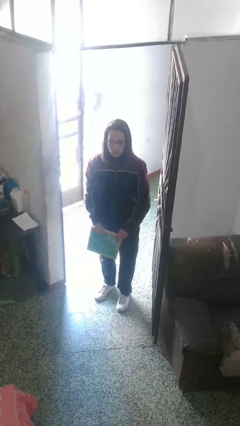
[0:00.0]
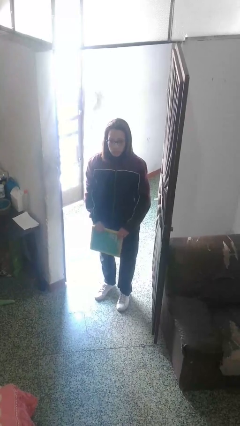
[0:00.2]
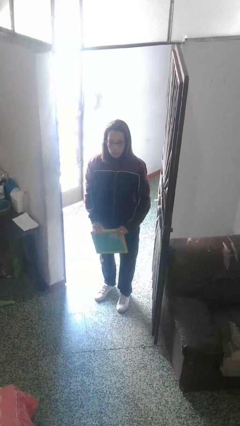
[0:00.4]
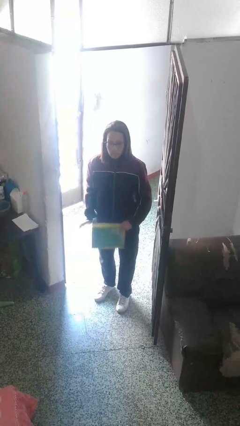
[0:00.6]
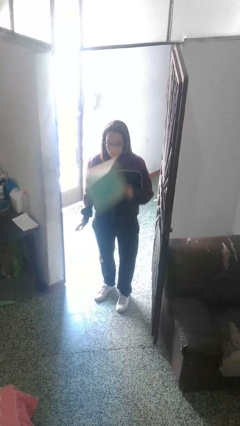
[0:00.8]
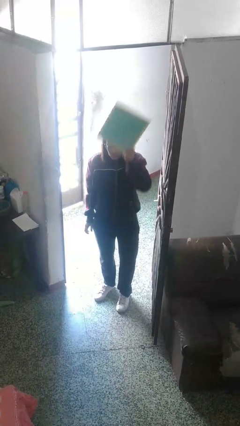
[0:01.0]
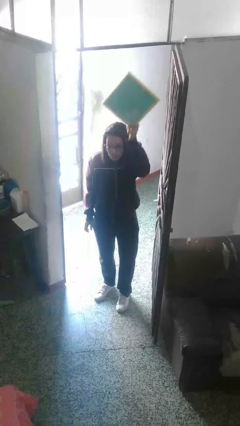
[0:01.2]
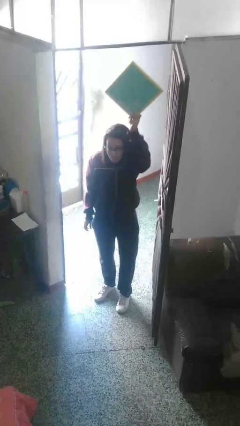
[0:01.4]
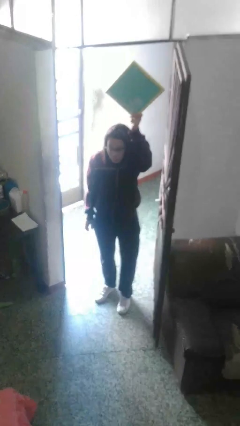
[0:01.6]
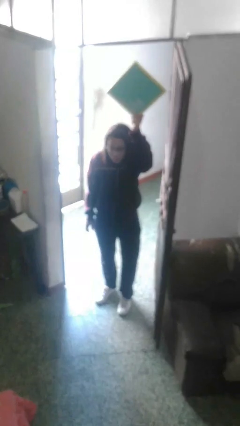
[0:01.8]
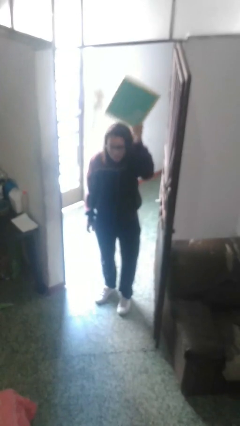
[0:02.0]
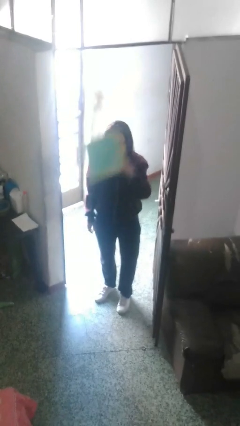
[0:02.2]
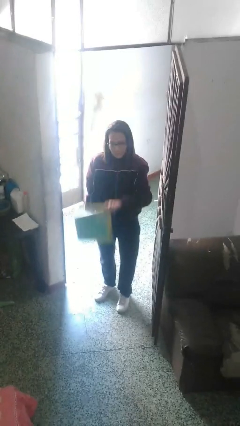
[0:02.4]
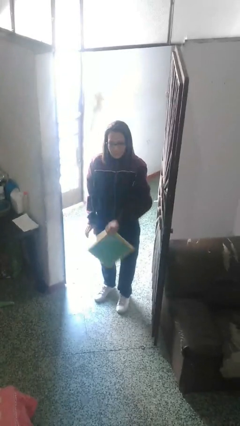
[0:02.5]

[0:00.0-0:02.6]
person holds object above head

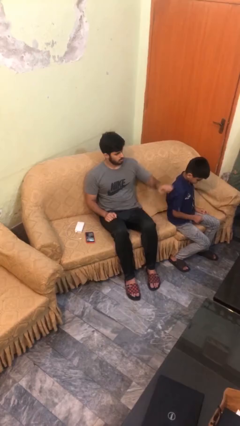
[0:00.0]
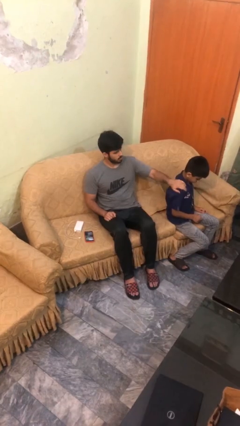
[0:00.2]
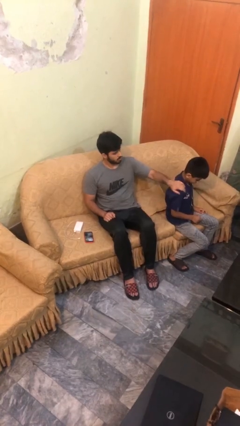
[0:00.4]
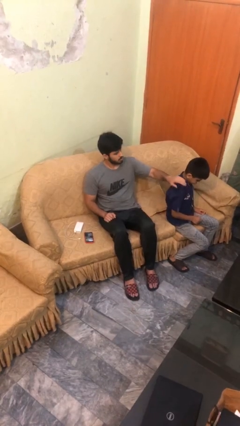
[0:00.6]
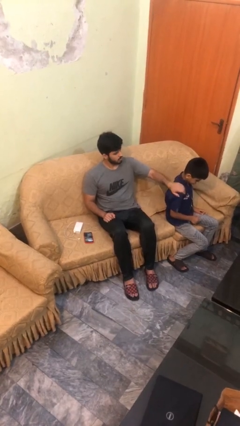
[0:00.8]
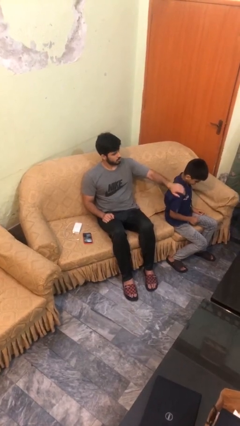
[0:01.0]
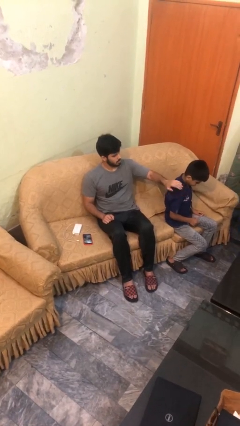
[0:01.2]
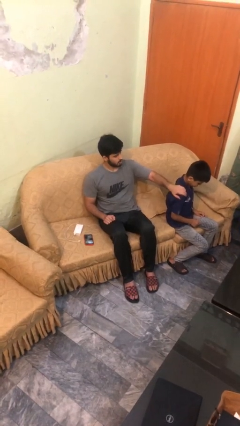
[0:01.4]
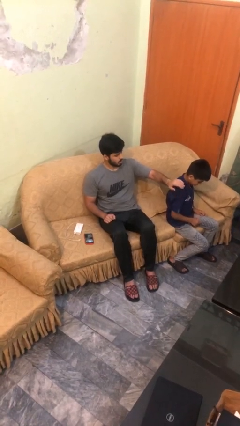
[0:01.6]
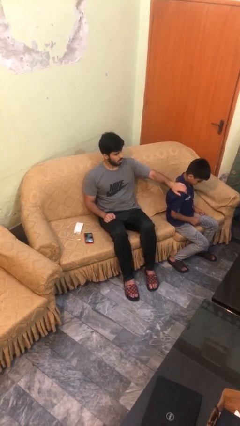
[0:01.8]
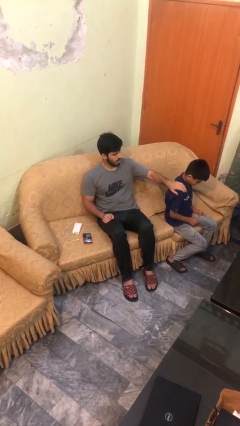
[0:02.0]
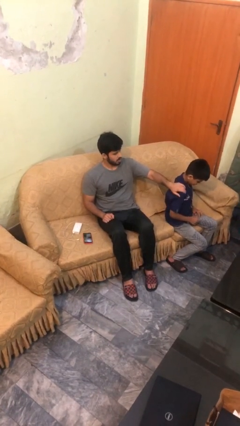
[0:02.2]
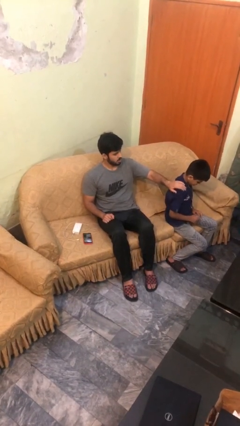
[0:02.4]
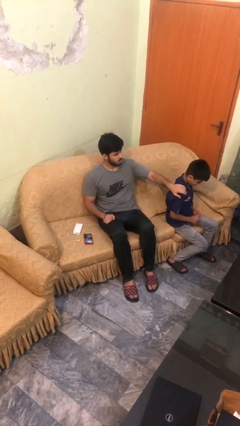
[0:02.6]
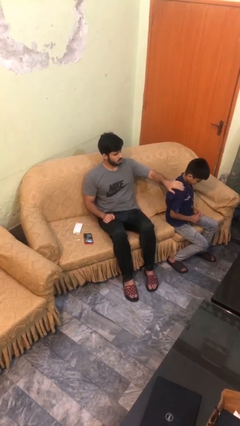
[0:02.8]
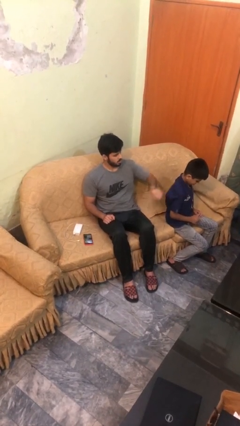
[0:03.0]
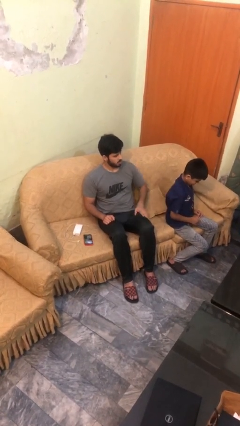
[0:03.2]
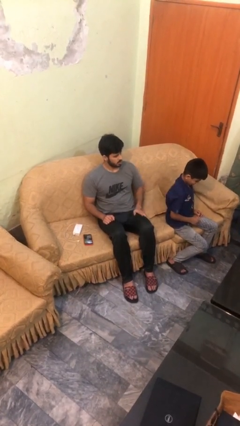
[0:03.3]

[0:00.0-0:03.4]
person pounds shoulders of person

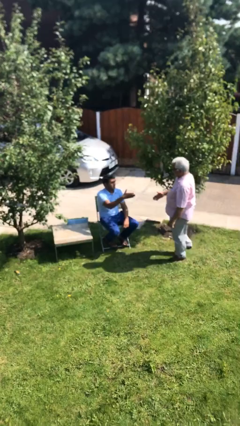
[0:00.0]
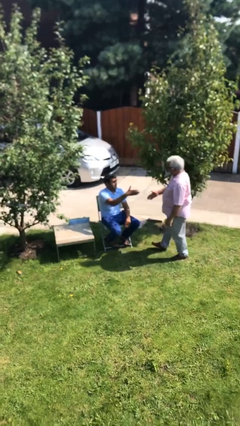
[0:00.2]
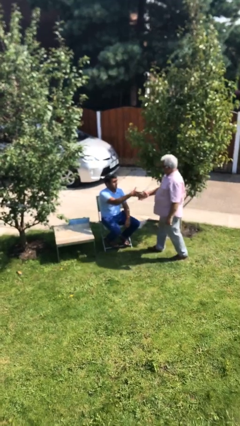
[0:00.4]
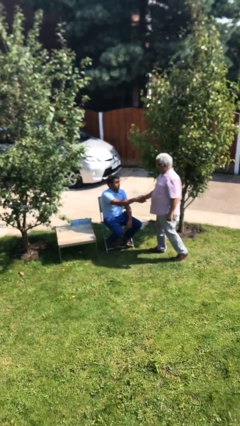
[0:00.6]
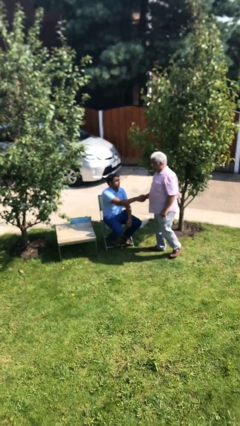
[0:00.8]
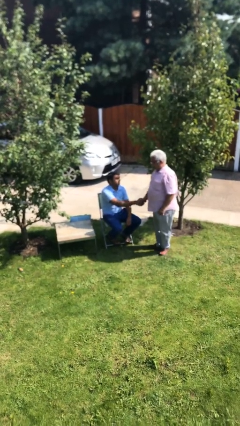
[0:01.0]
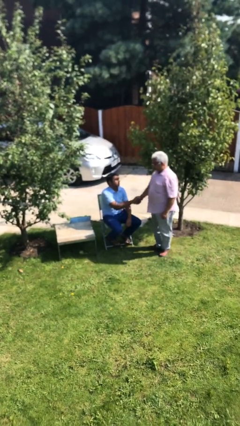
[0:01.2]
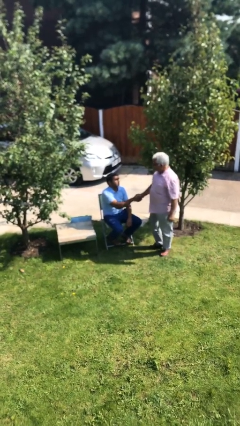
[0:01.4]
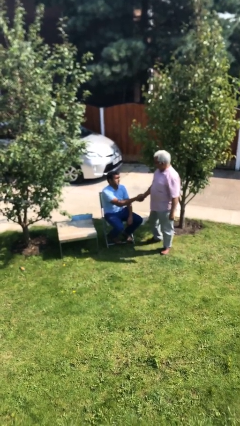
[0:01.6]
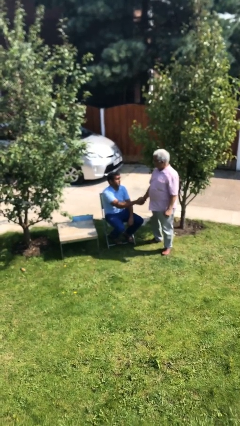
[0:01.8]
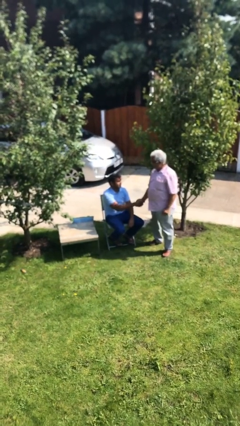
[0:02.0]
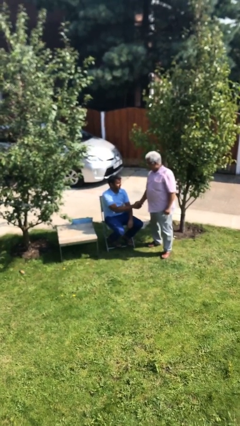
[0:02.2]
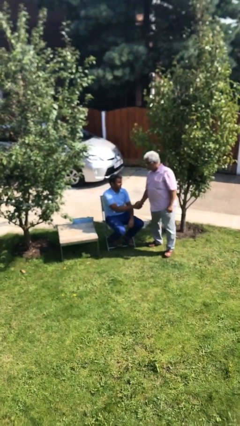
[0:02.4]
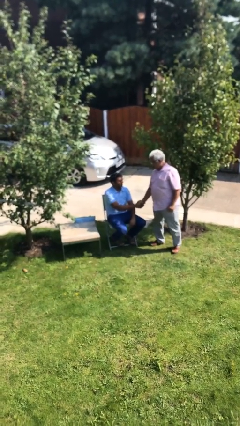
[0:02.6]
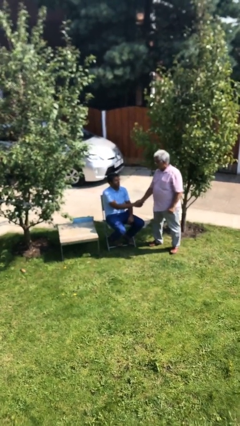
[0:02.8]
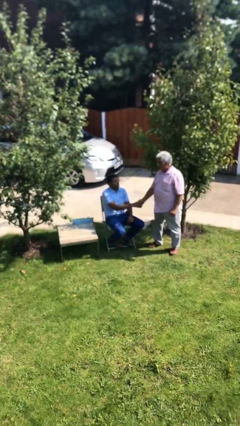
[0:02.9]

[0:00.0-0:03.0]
person shakes hand

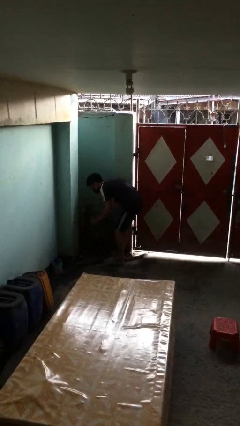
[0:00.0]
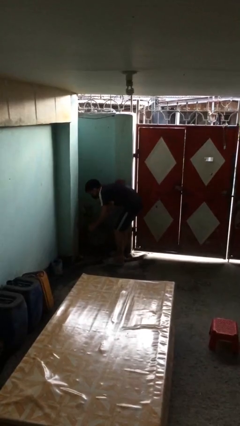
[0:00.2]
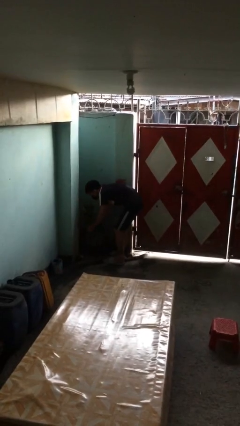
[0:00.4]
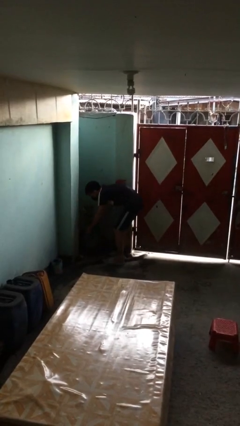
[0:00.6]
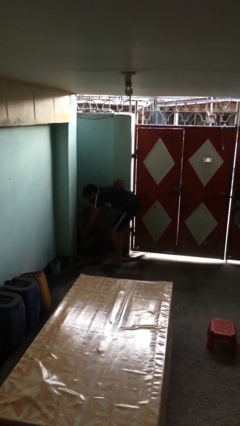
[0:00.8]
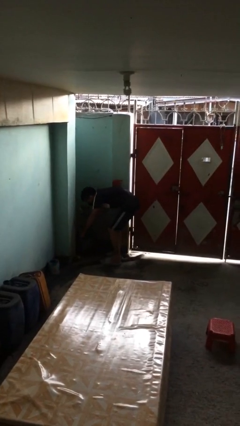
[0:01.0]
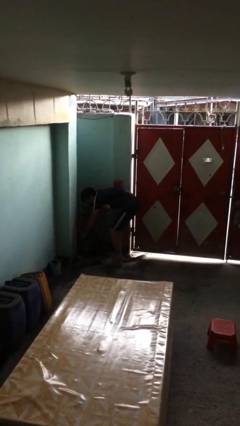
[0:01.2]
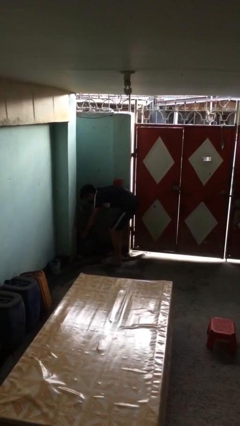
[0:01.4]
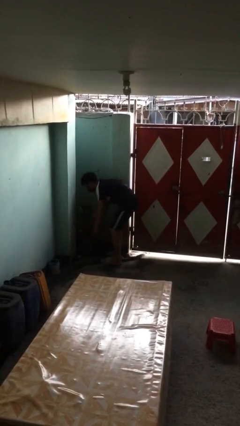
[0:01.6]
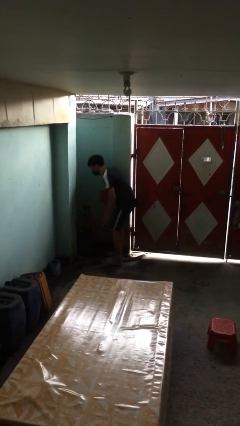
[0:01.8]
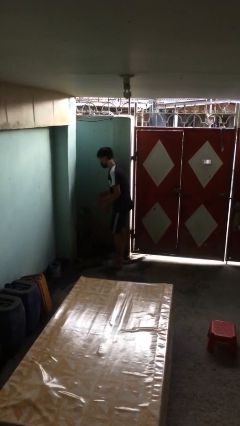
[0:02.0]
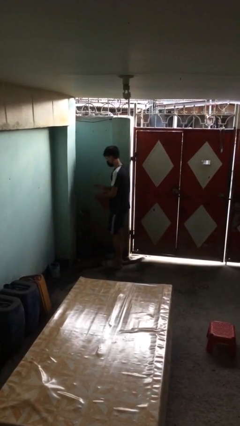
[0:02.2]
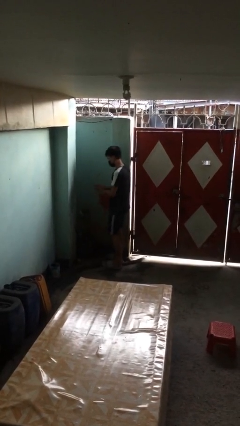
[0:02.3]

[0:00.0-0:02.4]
person puts down object on floor

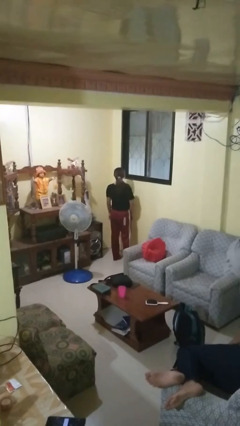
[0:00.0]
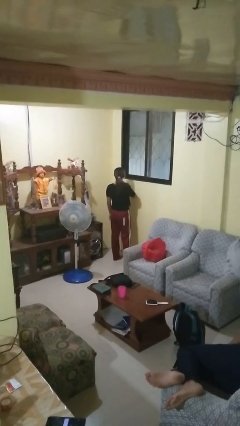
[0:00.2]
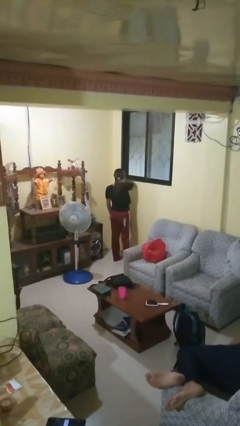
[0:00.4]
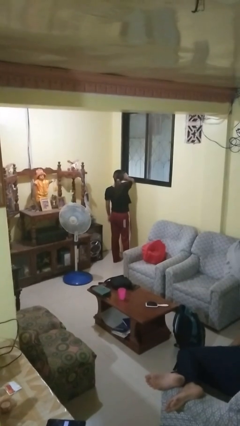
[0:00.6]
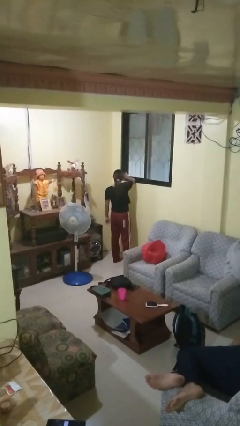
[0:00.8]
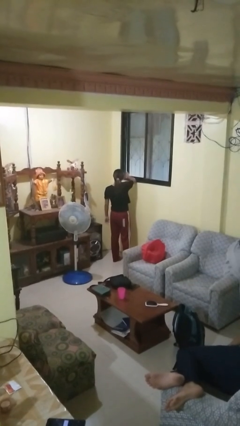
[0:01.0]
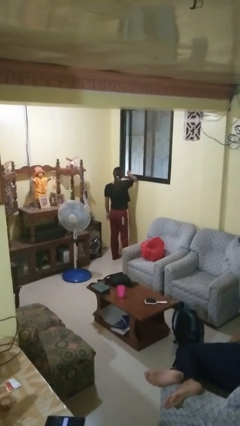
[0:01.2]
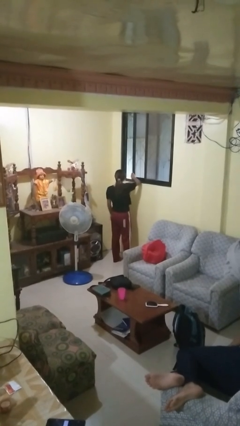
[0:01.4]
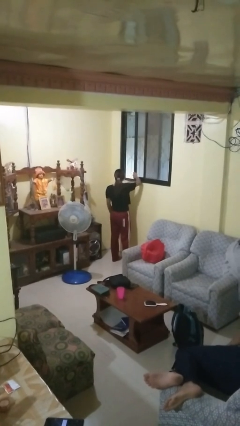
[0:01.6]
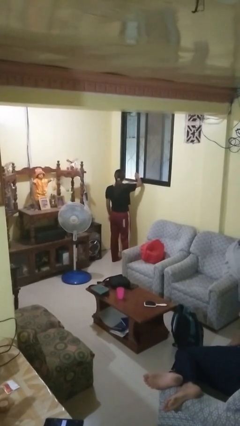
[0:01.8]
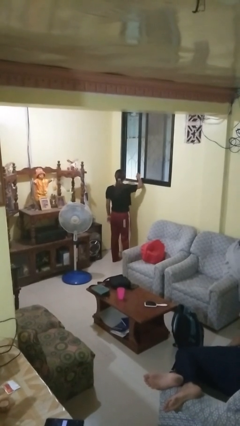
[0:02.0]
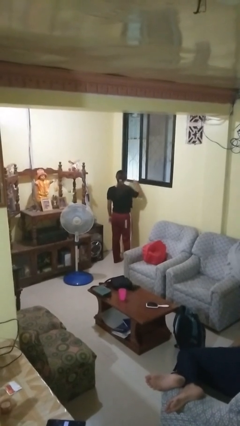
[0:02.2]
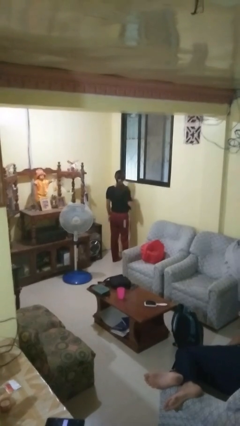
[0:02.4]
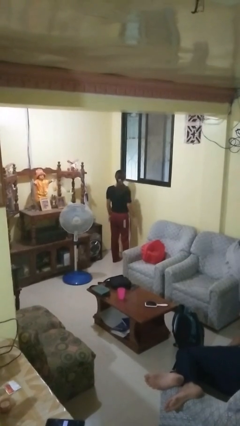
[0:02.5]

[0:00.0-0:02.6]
person opens home window

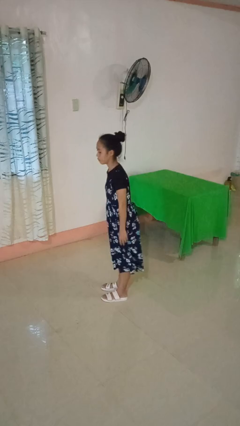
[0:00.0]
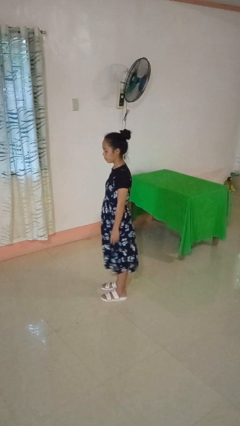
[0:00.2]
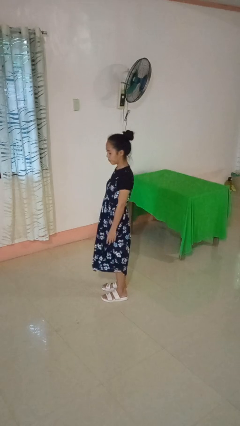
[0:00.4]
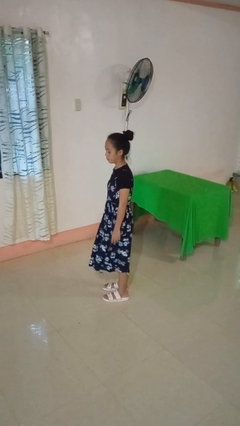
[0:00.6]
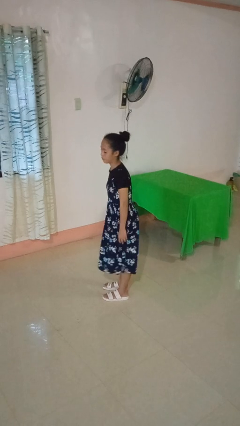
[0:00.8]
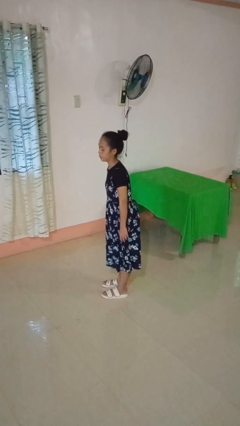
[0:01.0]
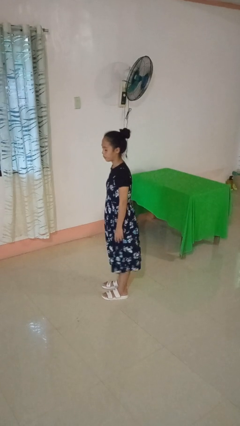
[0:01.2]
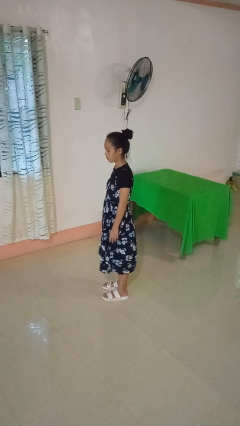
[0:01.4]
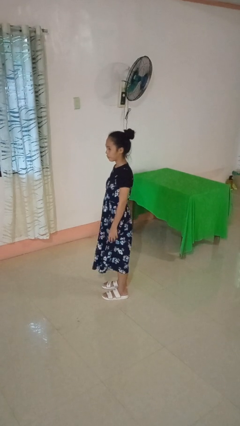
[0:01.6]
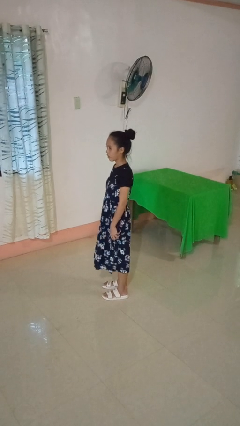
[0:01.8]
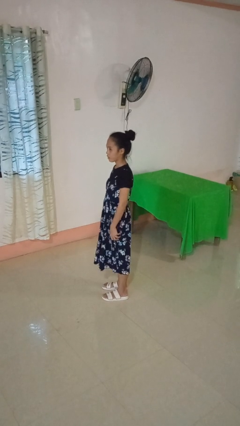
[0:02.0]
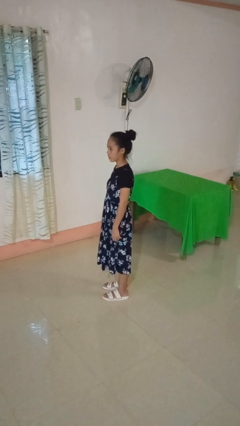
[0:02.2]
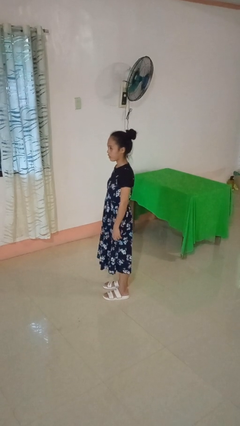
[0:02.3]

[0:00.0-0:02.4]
person wiggles hips

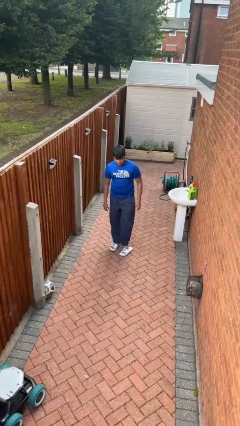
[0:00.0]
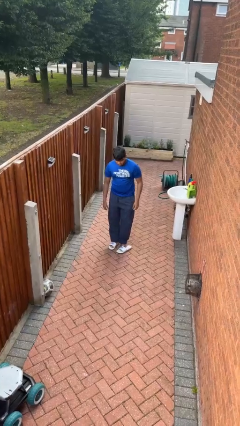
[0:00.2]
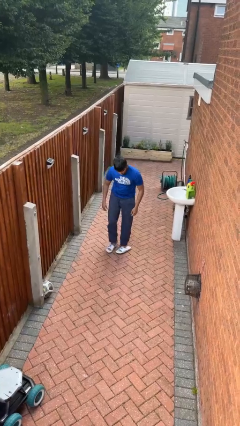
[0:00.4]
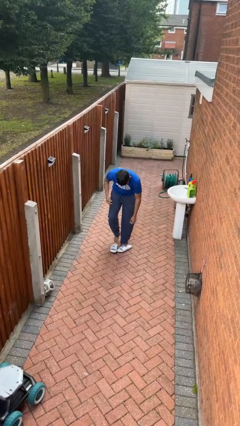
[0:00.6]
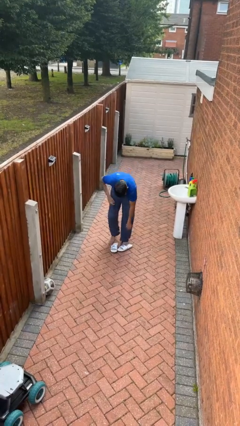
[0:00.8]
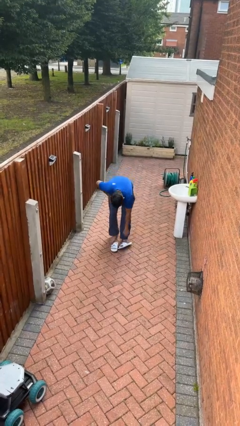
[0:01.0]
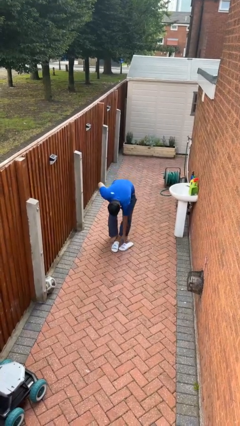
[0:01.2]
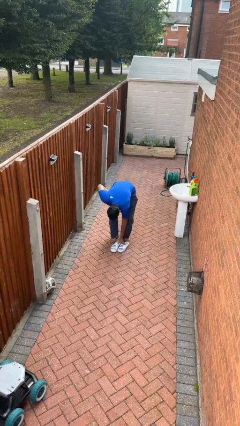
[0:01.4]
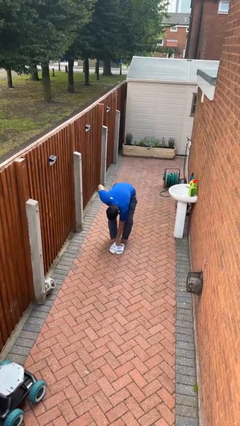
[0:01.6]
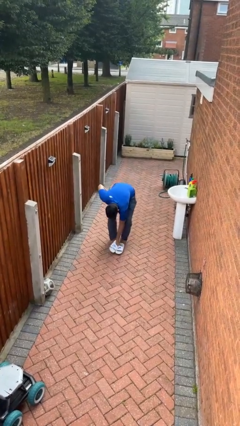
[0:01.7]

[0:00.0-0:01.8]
person takes off shoes
